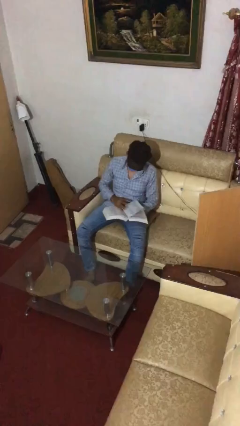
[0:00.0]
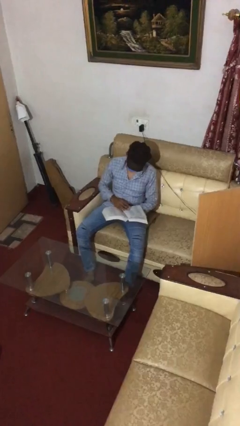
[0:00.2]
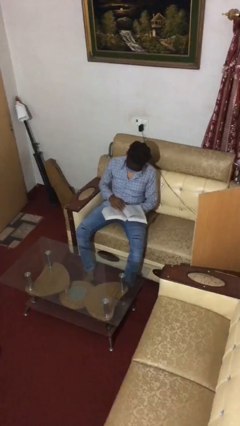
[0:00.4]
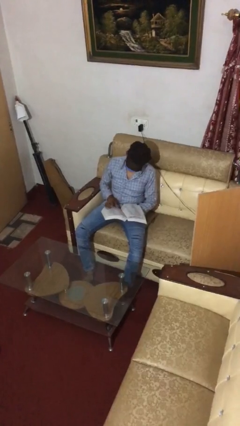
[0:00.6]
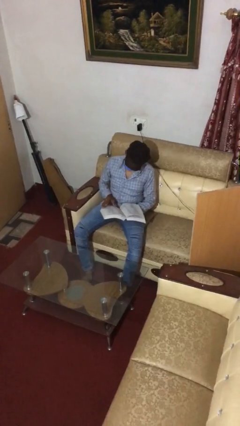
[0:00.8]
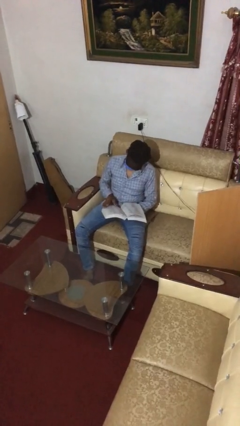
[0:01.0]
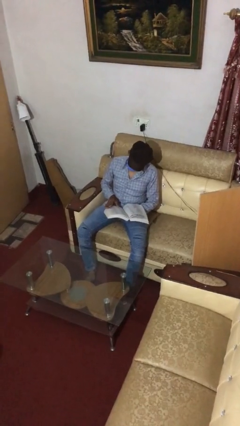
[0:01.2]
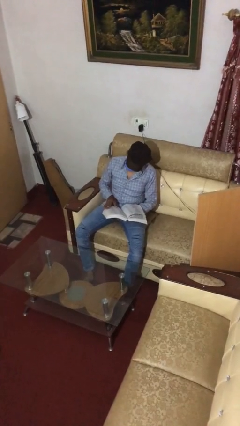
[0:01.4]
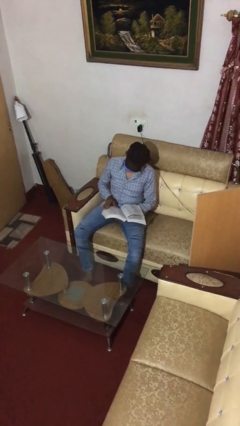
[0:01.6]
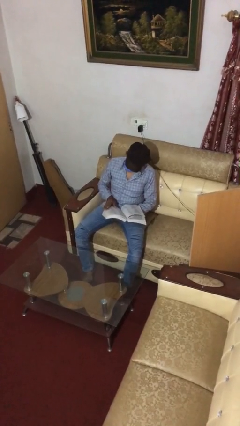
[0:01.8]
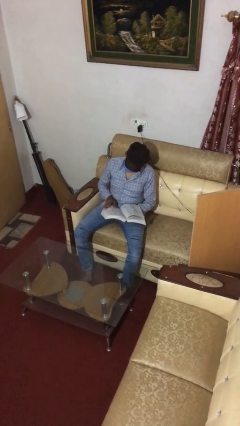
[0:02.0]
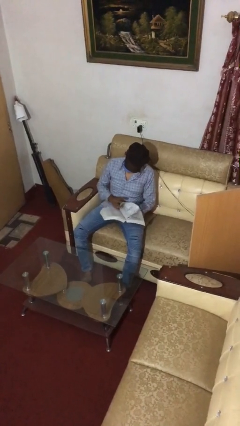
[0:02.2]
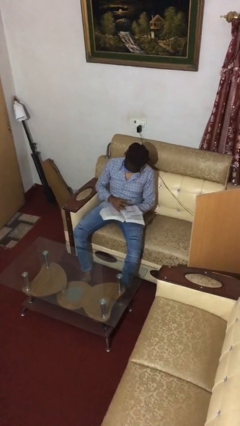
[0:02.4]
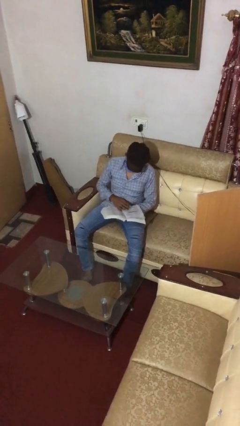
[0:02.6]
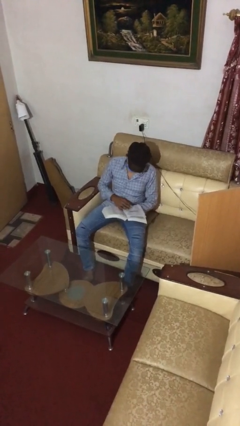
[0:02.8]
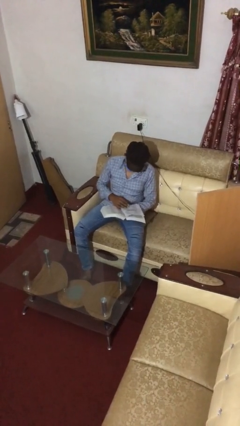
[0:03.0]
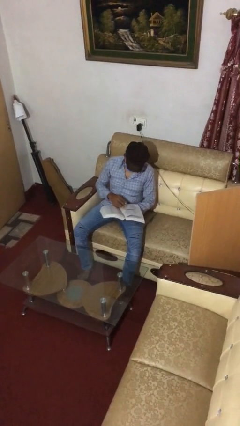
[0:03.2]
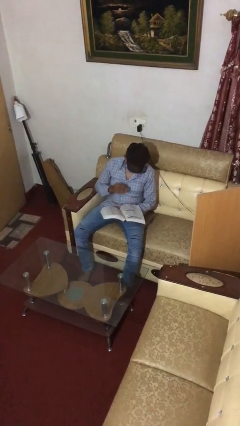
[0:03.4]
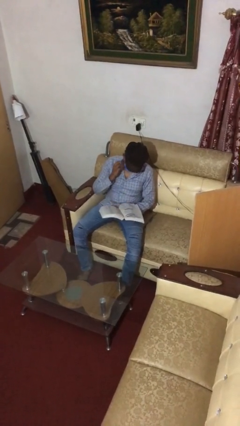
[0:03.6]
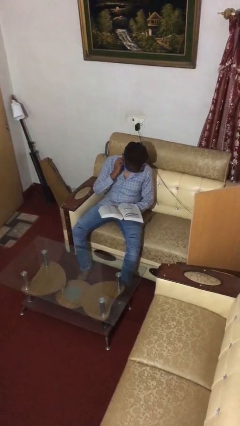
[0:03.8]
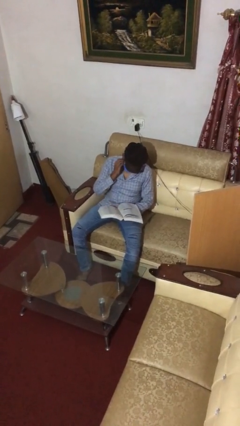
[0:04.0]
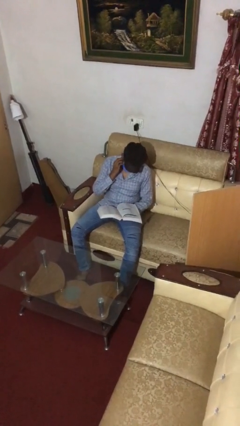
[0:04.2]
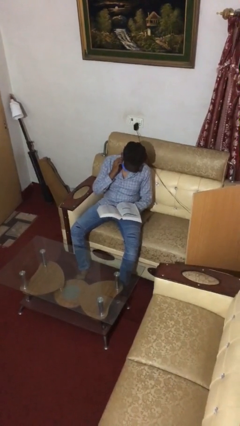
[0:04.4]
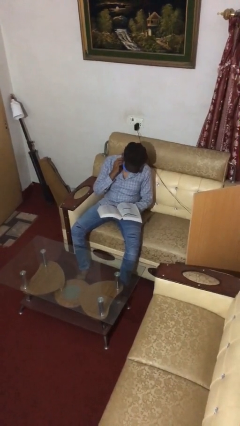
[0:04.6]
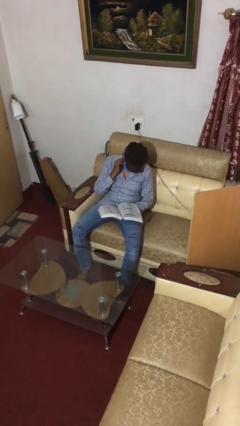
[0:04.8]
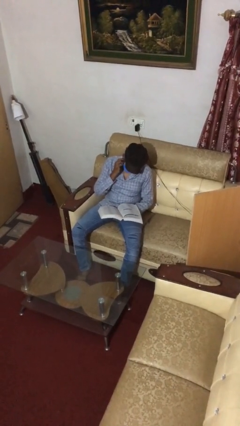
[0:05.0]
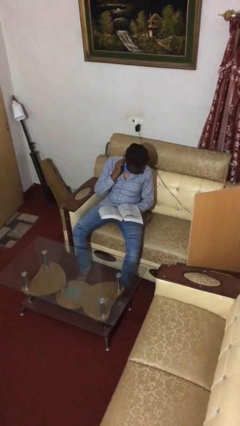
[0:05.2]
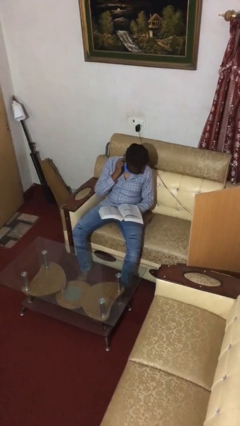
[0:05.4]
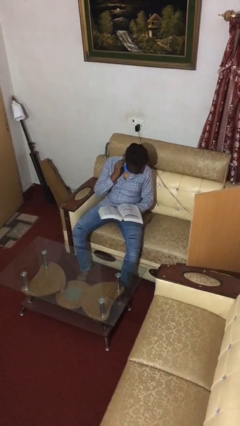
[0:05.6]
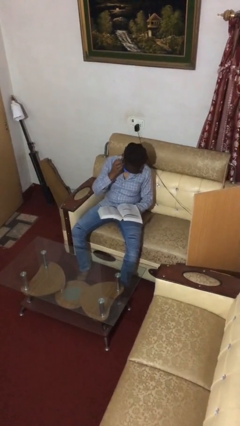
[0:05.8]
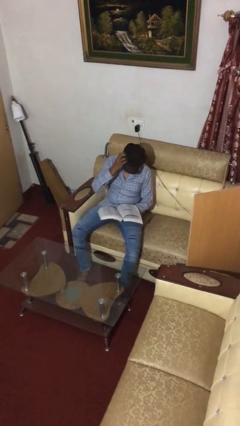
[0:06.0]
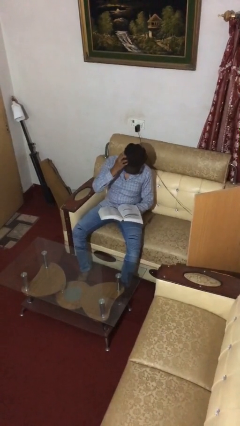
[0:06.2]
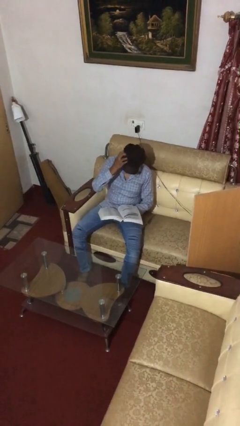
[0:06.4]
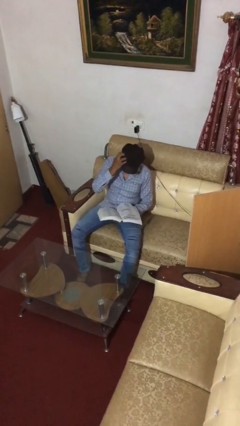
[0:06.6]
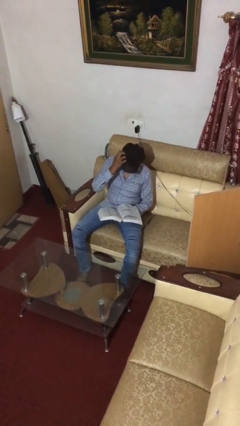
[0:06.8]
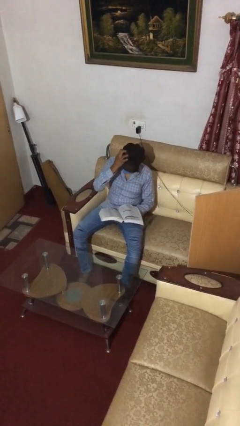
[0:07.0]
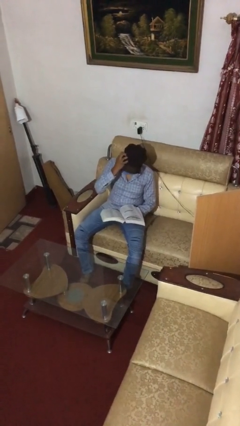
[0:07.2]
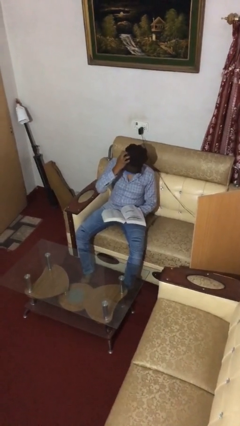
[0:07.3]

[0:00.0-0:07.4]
person reads document

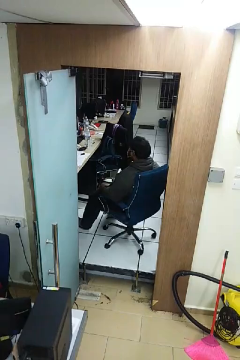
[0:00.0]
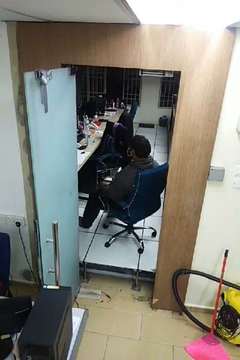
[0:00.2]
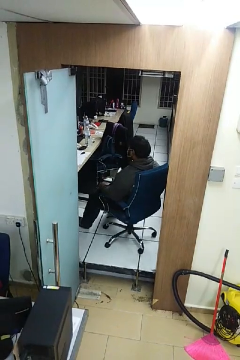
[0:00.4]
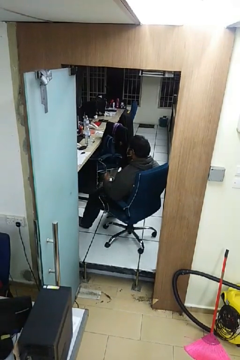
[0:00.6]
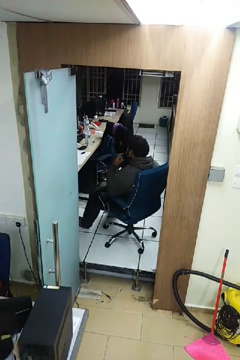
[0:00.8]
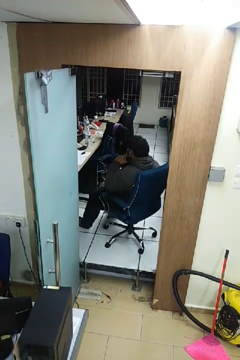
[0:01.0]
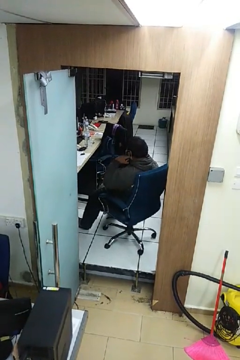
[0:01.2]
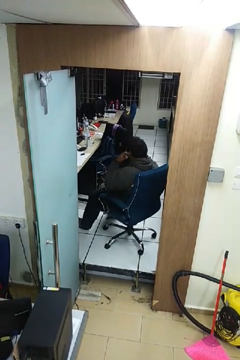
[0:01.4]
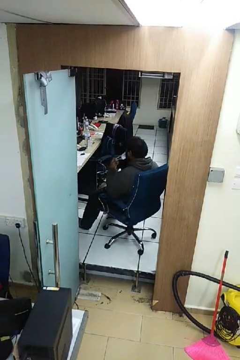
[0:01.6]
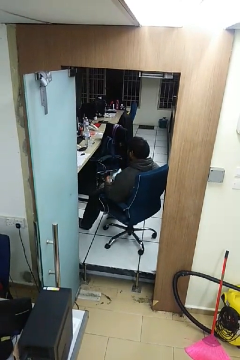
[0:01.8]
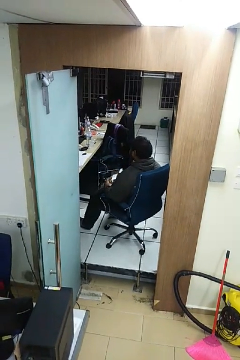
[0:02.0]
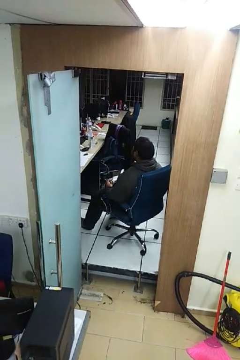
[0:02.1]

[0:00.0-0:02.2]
person takes off facemask

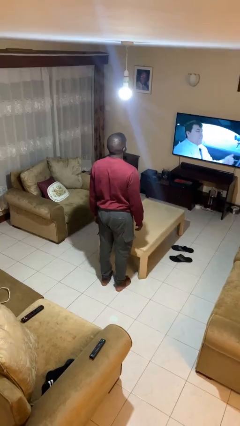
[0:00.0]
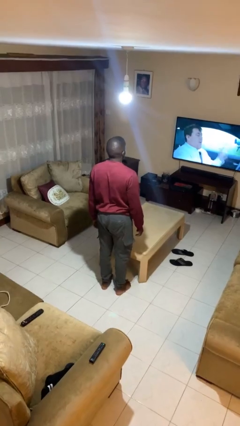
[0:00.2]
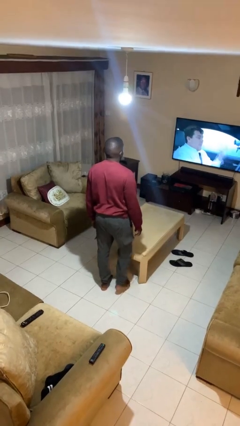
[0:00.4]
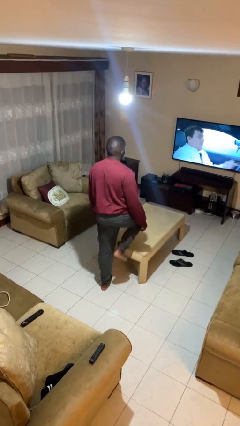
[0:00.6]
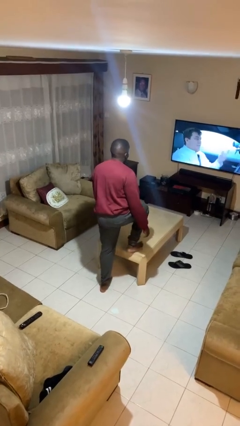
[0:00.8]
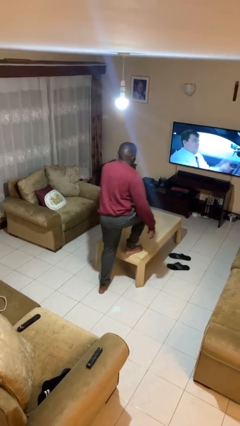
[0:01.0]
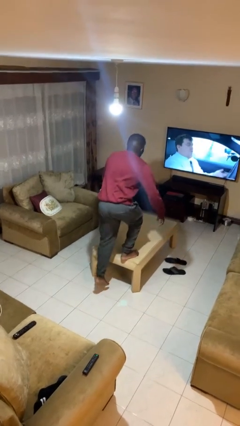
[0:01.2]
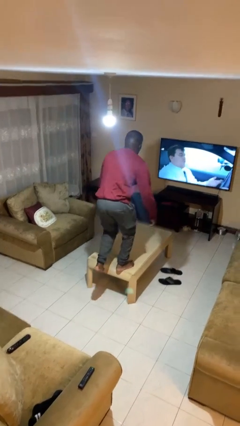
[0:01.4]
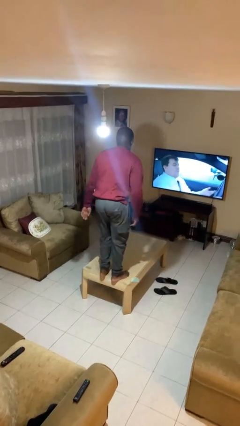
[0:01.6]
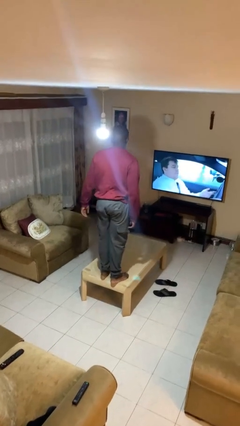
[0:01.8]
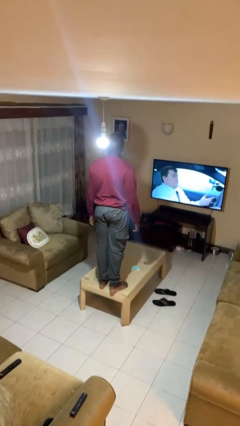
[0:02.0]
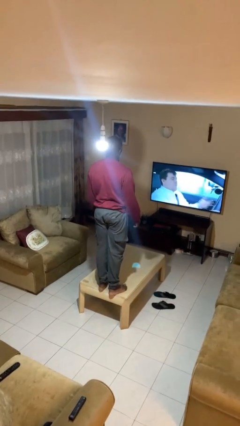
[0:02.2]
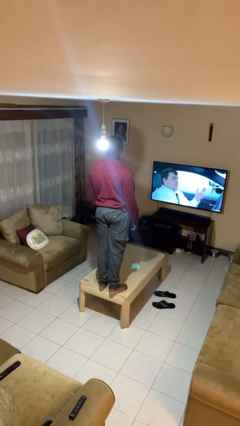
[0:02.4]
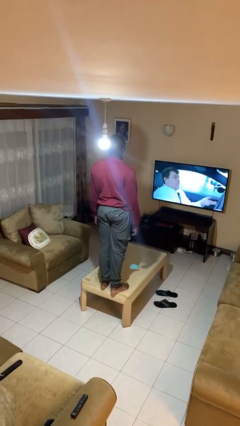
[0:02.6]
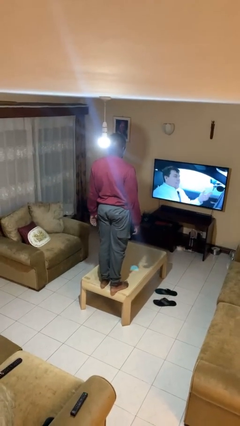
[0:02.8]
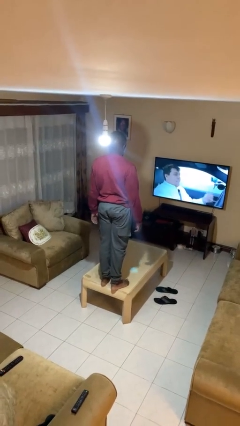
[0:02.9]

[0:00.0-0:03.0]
person climbs on table

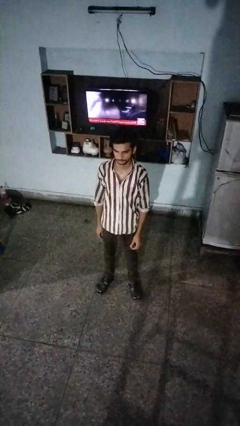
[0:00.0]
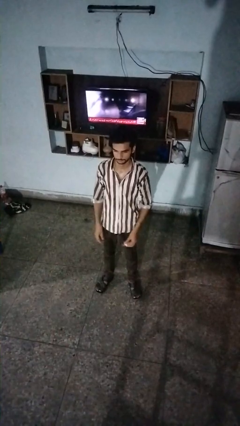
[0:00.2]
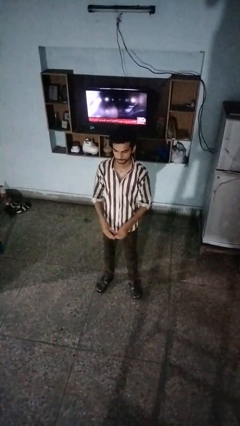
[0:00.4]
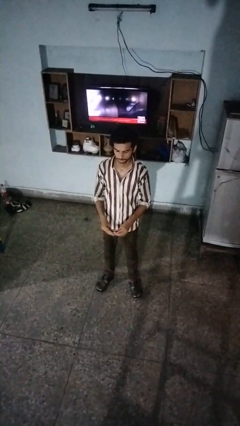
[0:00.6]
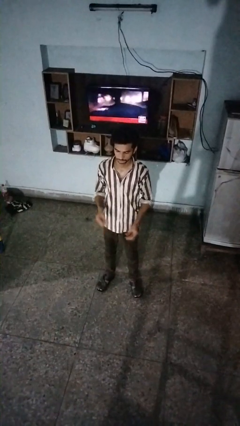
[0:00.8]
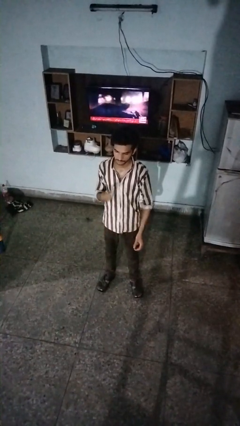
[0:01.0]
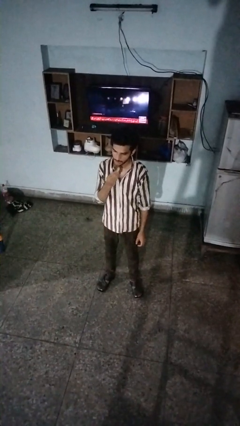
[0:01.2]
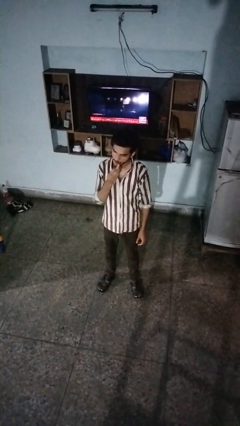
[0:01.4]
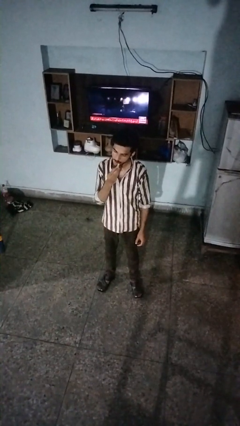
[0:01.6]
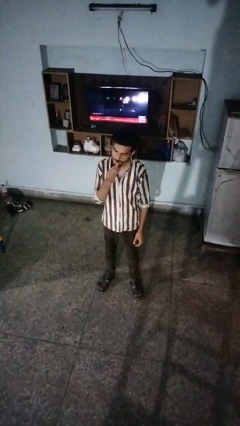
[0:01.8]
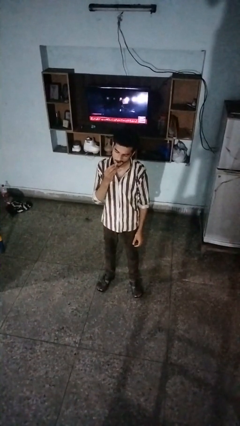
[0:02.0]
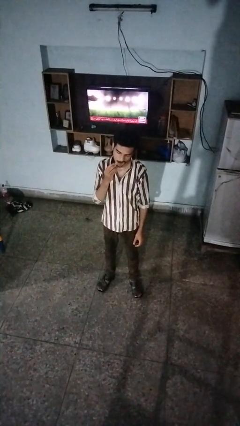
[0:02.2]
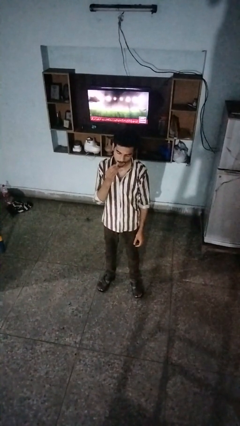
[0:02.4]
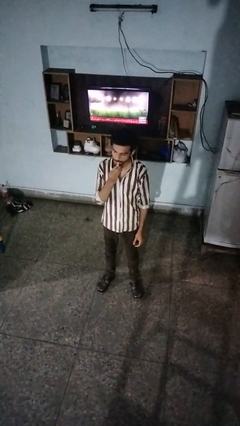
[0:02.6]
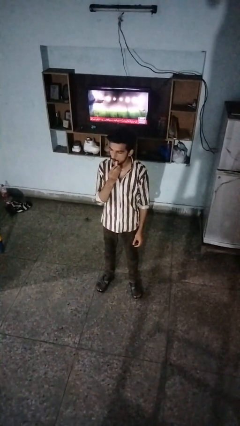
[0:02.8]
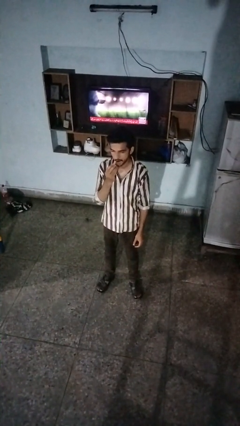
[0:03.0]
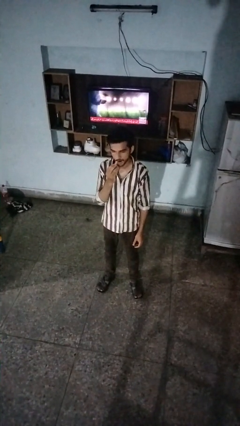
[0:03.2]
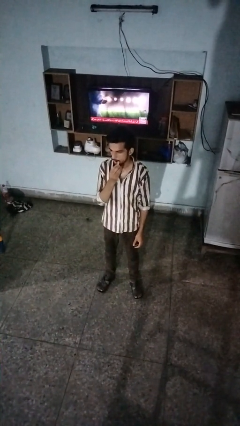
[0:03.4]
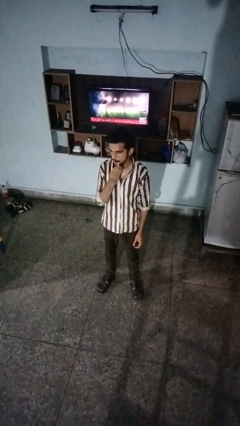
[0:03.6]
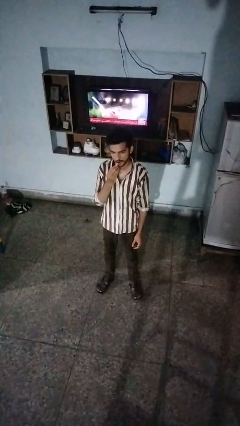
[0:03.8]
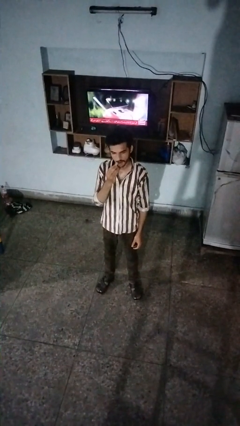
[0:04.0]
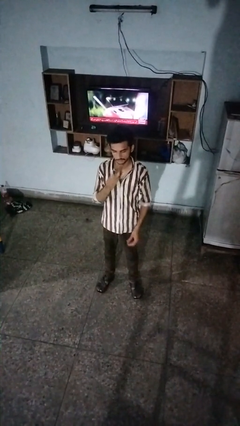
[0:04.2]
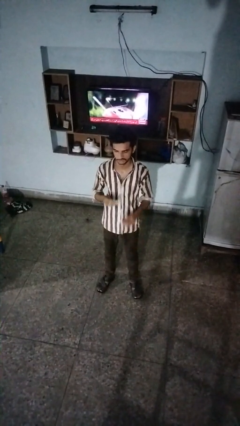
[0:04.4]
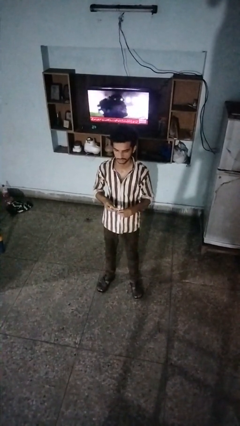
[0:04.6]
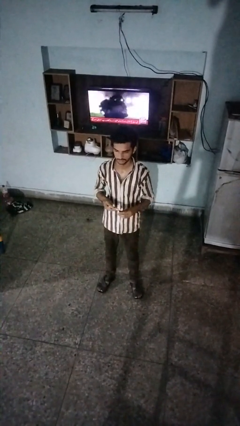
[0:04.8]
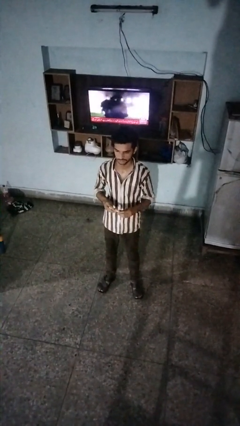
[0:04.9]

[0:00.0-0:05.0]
person applies lip makeup

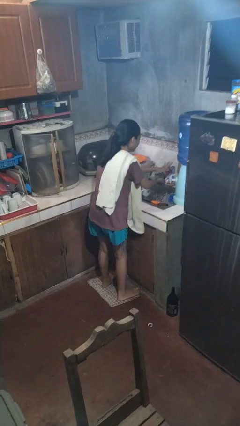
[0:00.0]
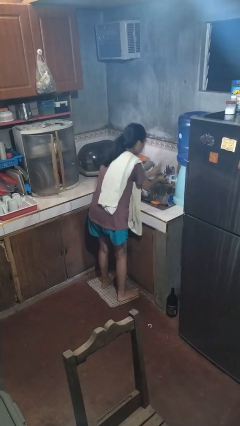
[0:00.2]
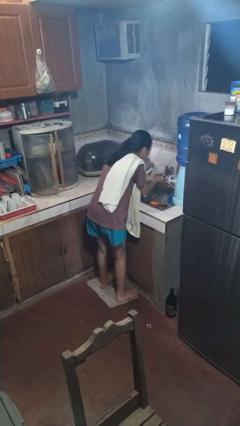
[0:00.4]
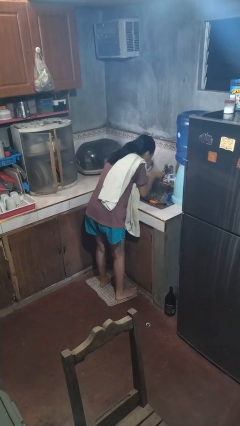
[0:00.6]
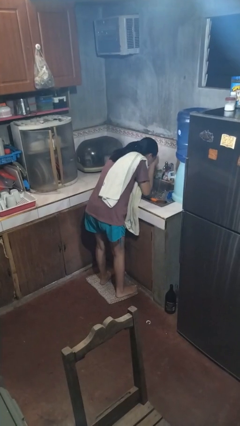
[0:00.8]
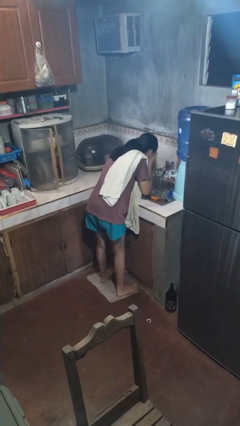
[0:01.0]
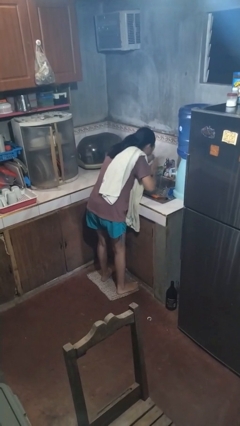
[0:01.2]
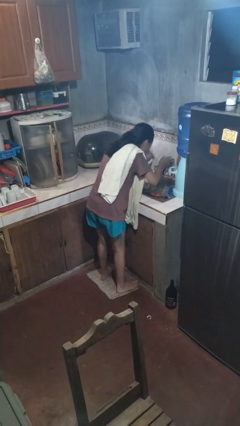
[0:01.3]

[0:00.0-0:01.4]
person washes face
